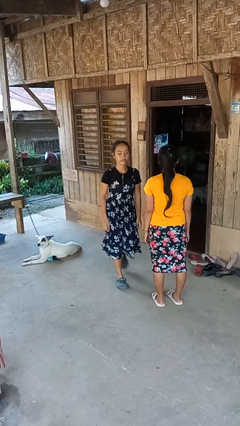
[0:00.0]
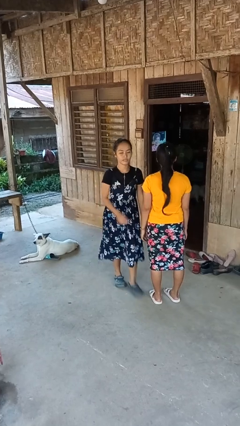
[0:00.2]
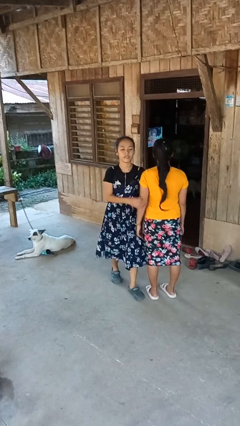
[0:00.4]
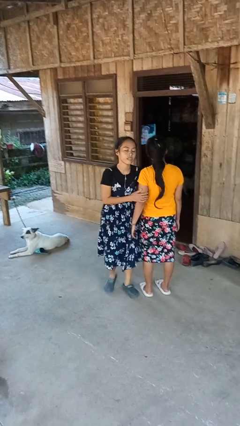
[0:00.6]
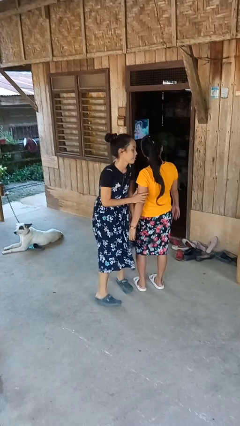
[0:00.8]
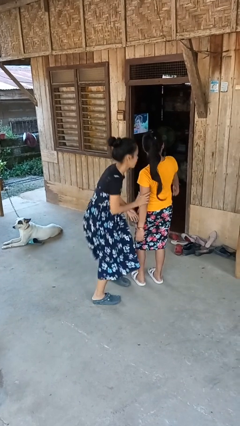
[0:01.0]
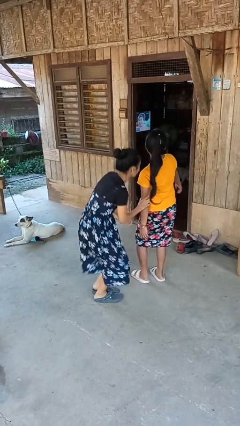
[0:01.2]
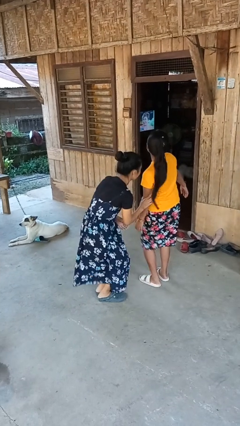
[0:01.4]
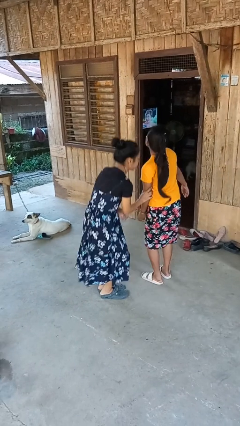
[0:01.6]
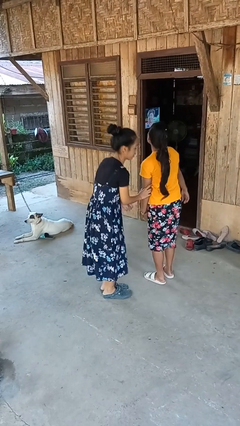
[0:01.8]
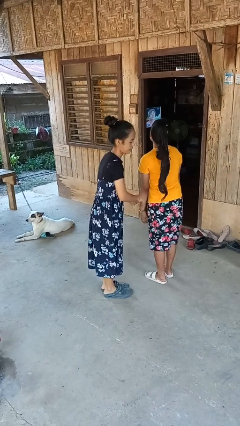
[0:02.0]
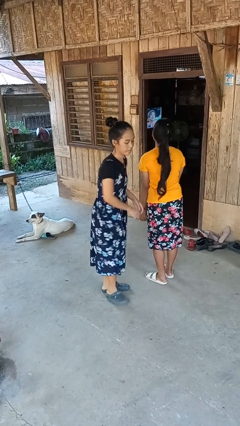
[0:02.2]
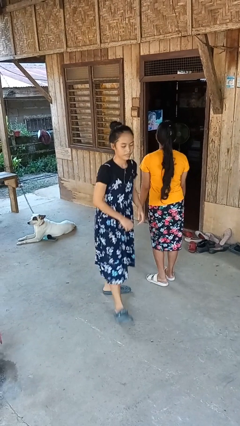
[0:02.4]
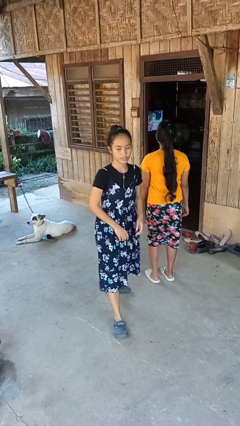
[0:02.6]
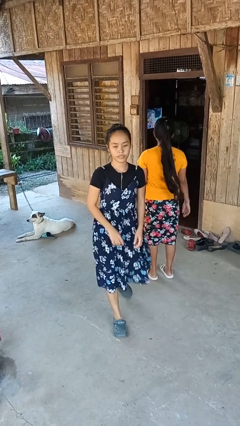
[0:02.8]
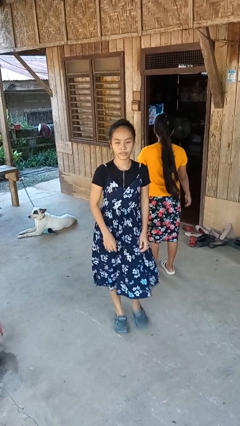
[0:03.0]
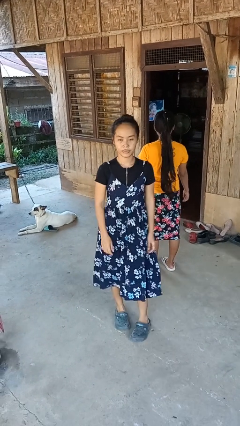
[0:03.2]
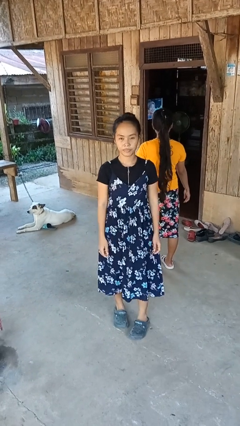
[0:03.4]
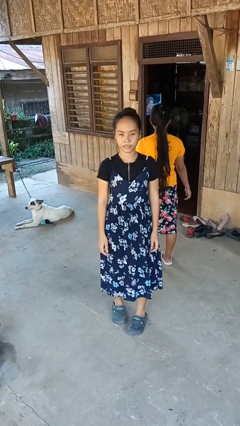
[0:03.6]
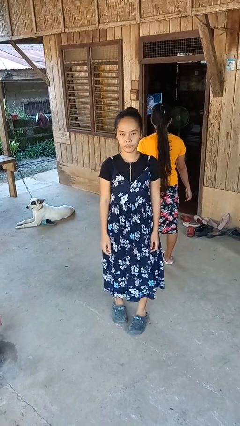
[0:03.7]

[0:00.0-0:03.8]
person bumps into person

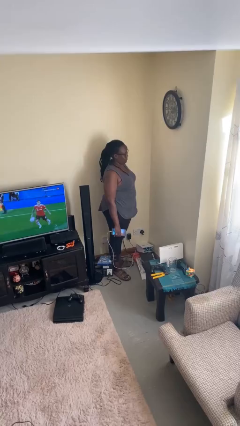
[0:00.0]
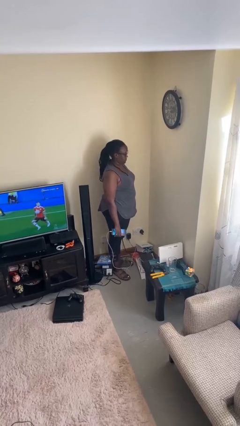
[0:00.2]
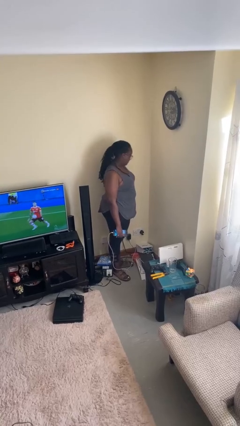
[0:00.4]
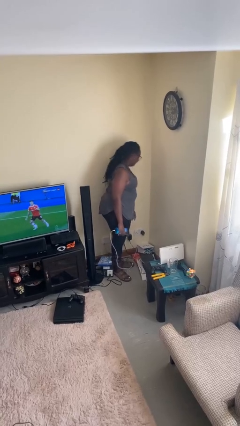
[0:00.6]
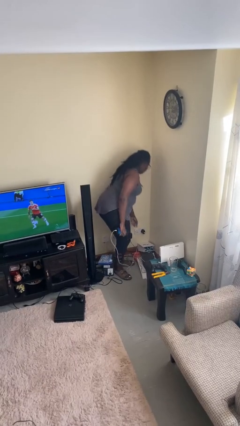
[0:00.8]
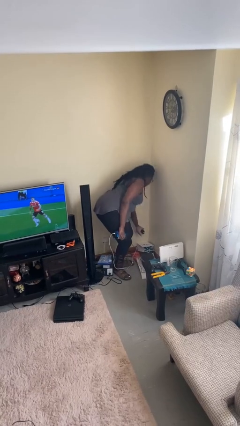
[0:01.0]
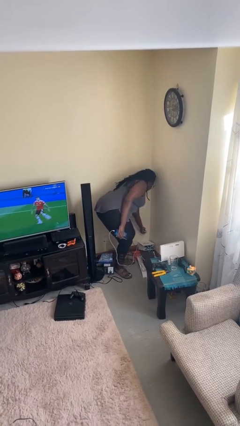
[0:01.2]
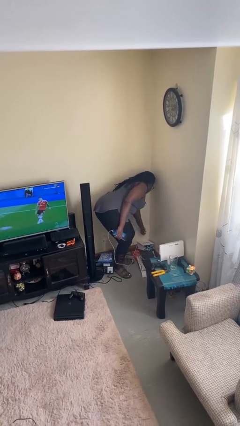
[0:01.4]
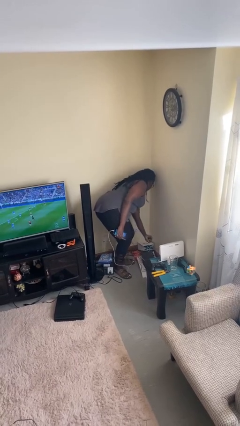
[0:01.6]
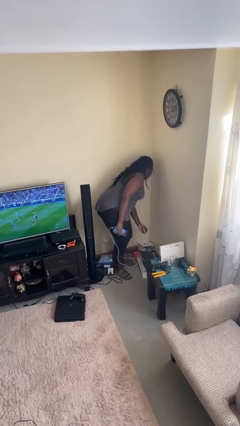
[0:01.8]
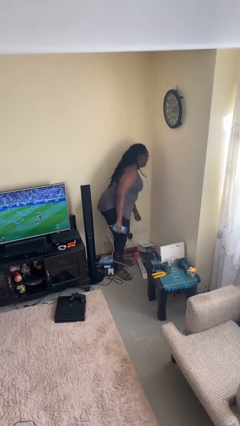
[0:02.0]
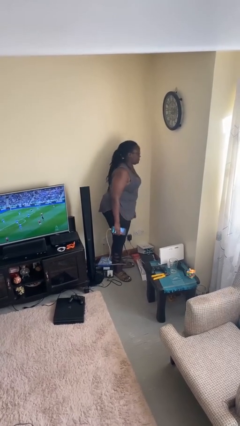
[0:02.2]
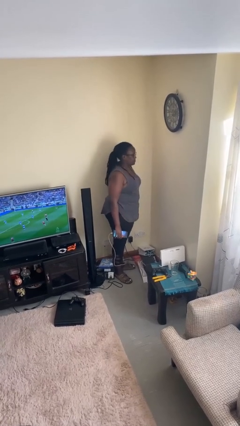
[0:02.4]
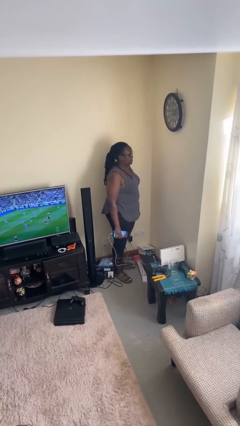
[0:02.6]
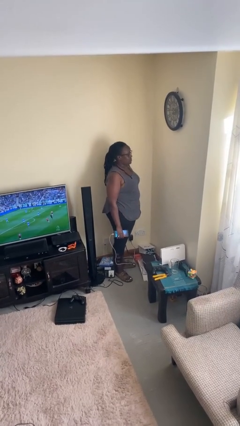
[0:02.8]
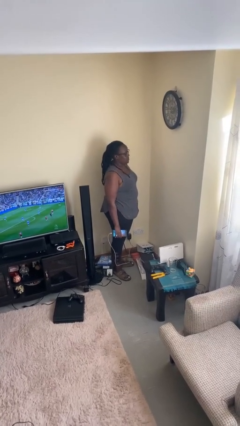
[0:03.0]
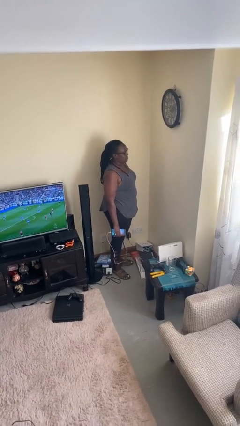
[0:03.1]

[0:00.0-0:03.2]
person unplugs from electrical socket

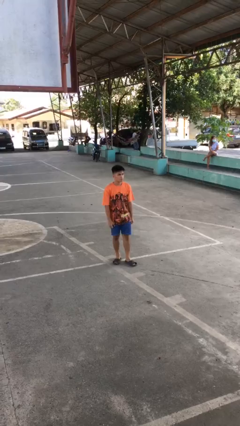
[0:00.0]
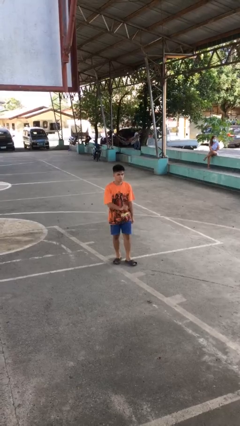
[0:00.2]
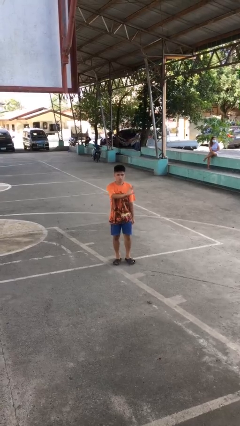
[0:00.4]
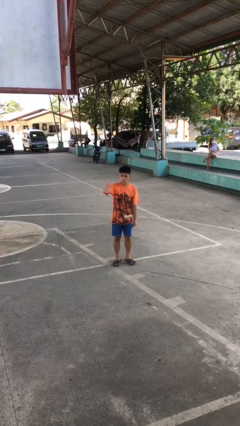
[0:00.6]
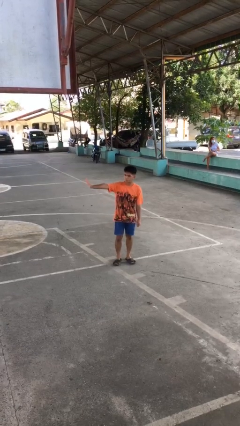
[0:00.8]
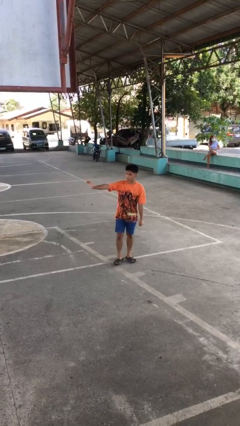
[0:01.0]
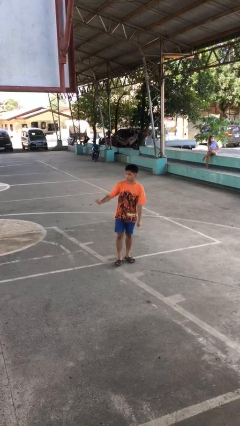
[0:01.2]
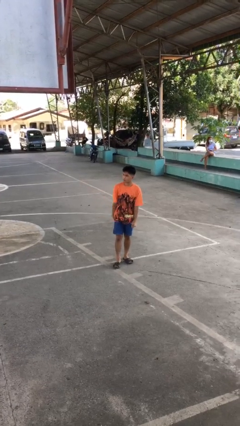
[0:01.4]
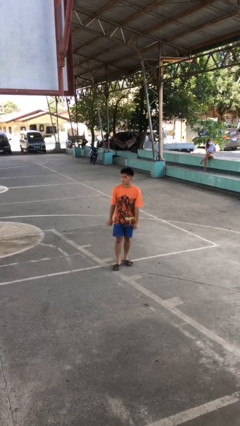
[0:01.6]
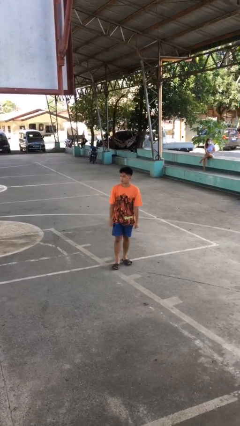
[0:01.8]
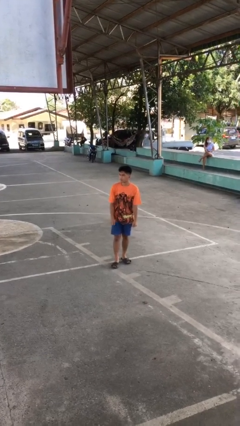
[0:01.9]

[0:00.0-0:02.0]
person gestures swipe right

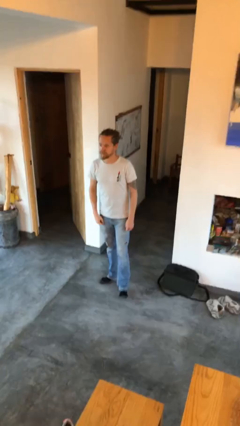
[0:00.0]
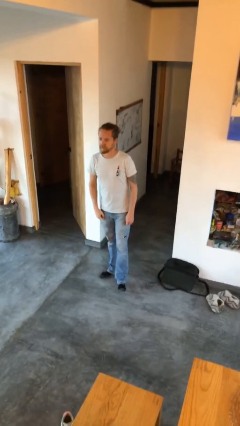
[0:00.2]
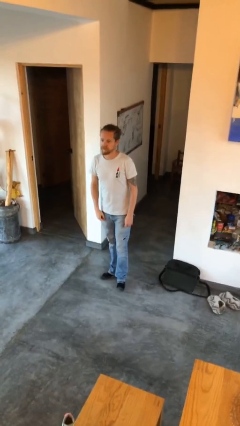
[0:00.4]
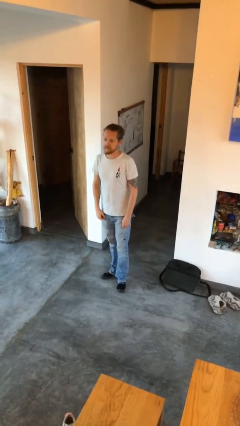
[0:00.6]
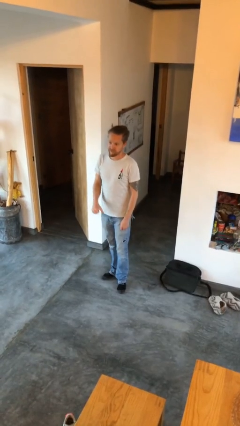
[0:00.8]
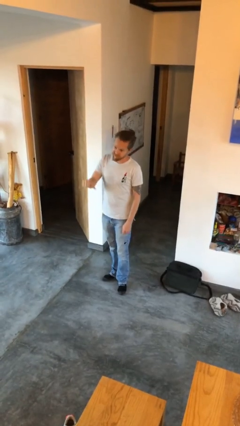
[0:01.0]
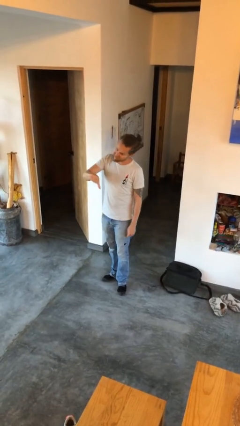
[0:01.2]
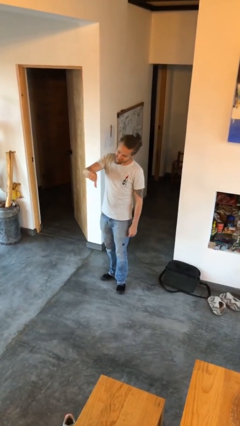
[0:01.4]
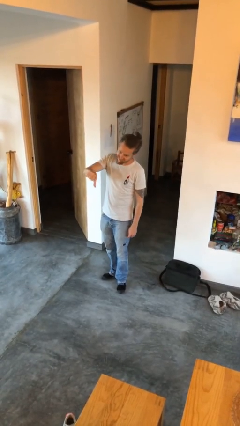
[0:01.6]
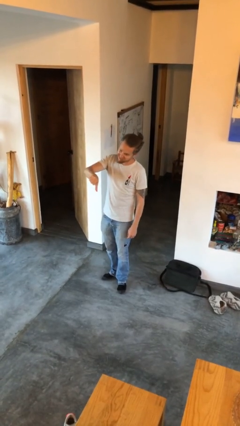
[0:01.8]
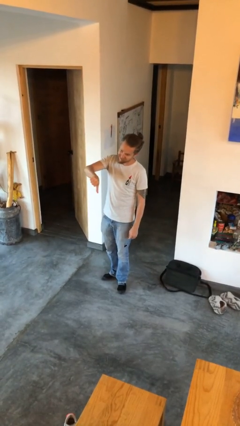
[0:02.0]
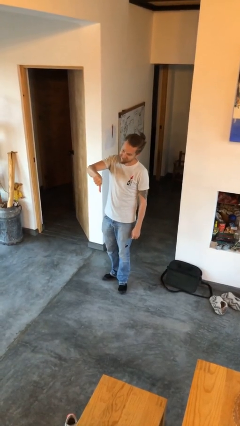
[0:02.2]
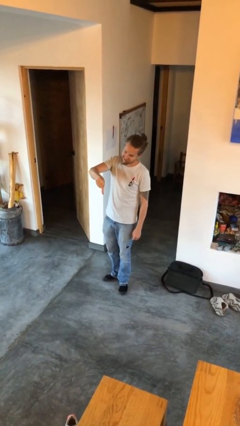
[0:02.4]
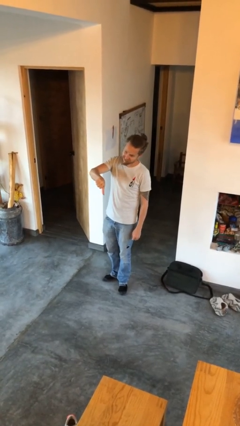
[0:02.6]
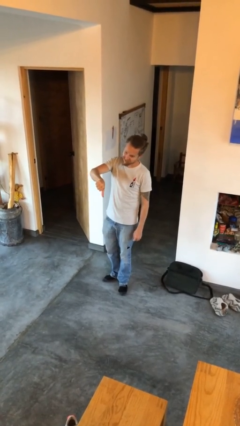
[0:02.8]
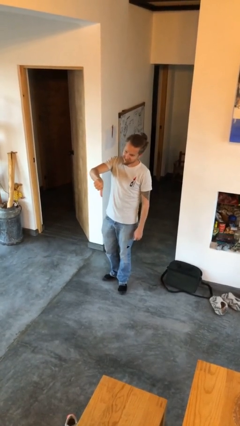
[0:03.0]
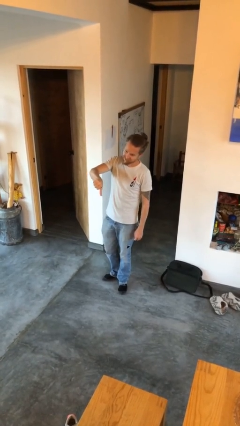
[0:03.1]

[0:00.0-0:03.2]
person gestures thumbs down

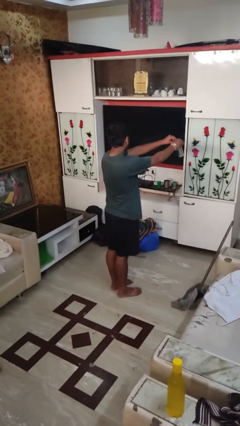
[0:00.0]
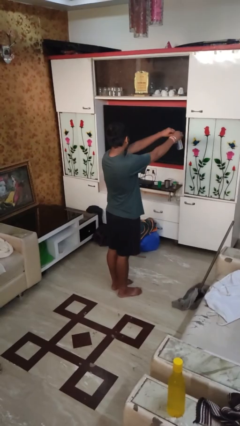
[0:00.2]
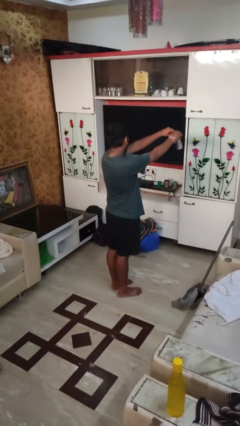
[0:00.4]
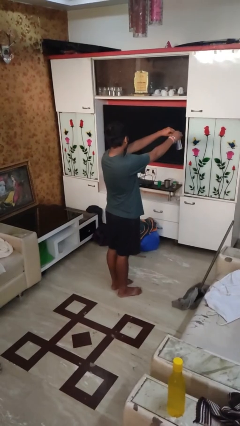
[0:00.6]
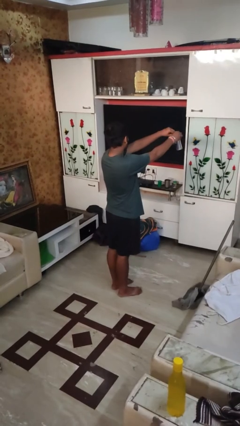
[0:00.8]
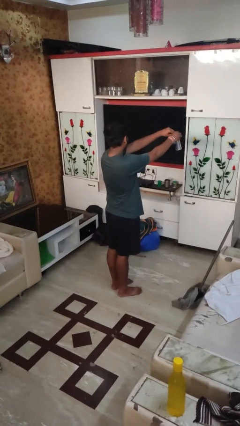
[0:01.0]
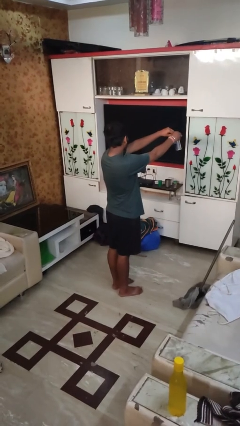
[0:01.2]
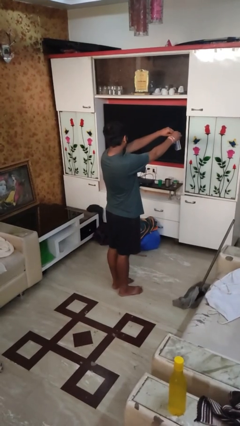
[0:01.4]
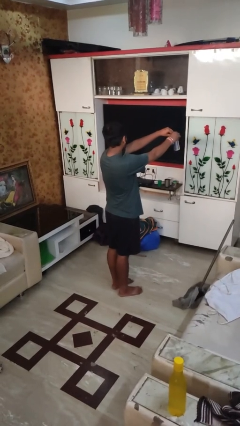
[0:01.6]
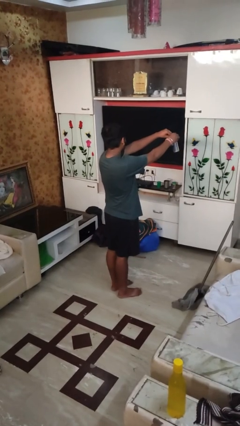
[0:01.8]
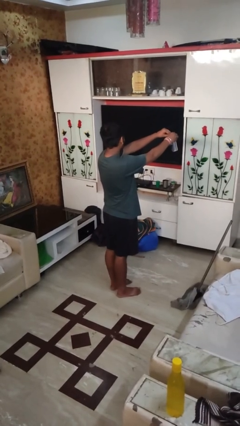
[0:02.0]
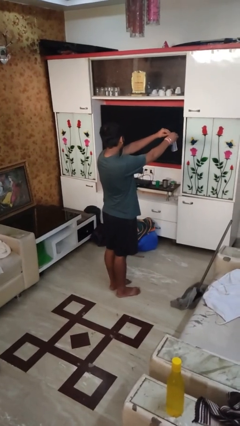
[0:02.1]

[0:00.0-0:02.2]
person opens beverage can

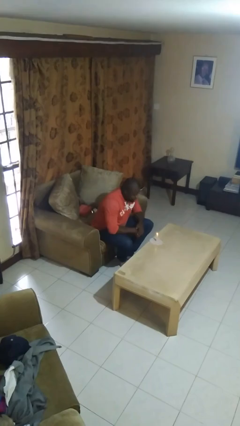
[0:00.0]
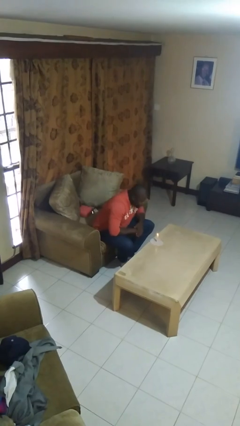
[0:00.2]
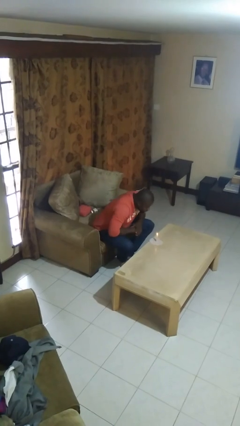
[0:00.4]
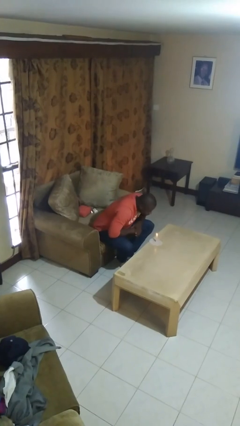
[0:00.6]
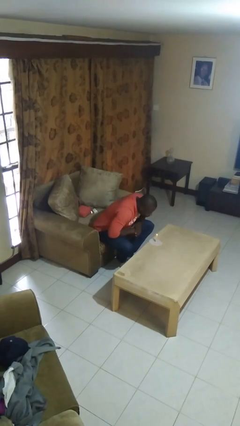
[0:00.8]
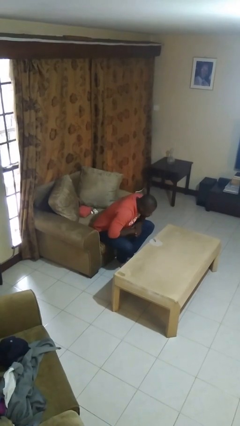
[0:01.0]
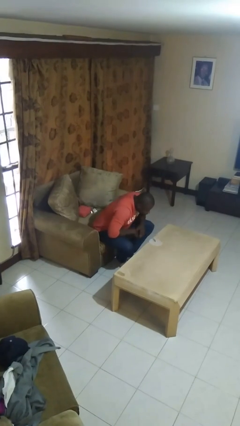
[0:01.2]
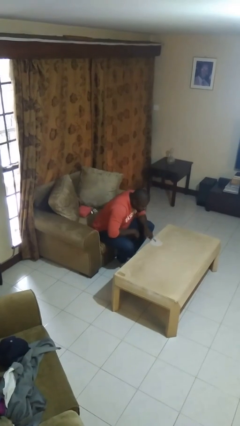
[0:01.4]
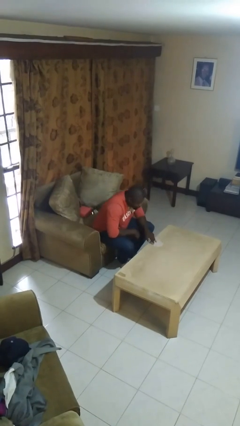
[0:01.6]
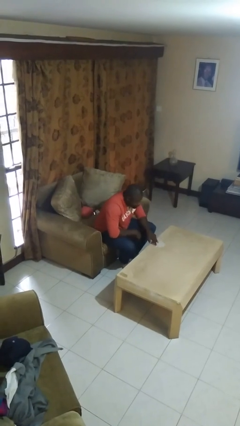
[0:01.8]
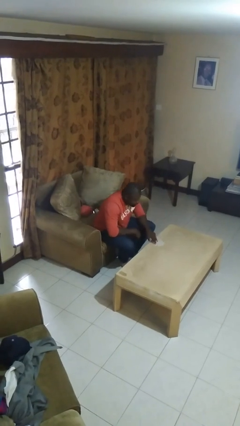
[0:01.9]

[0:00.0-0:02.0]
person extinguishes candle

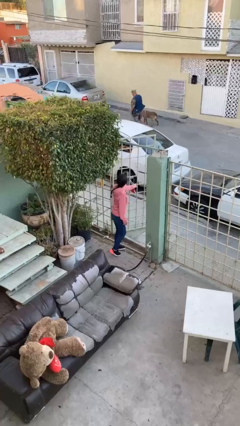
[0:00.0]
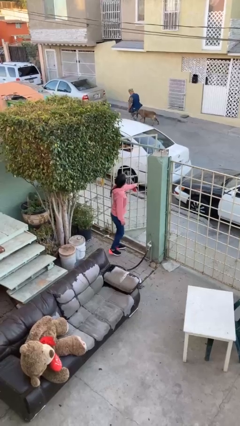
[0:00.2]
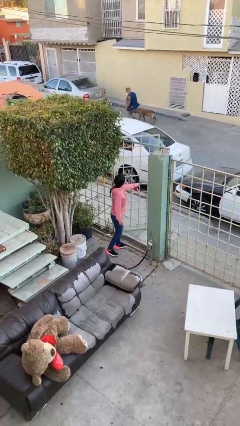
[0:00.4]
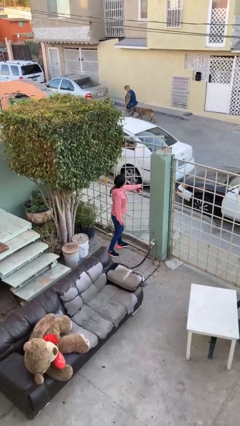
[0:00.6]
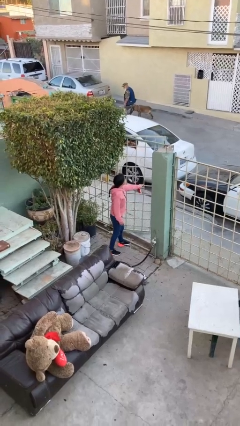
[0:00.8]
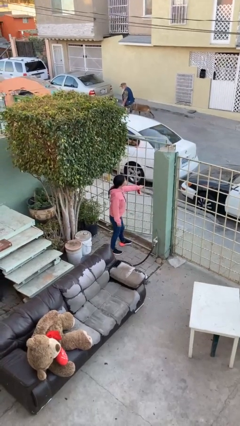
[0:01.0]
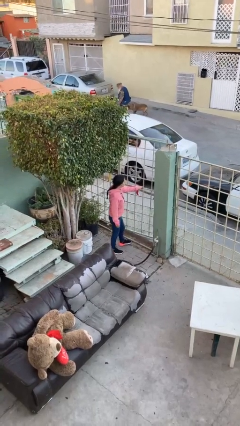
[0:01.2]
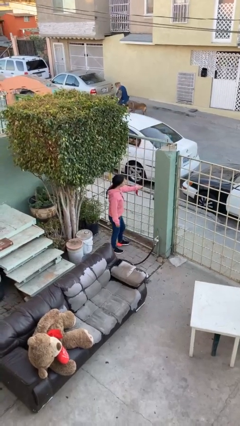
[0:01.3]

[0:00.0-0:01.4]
person closes facility door
